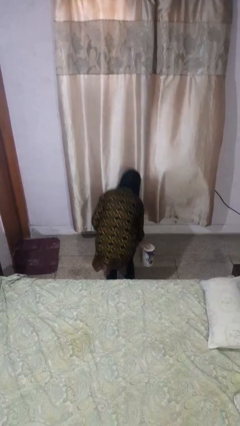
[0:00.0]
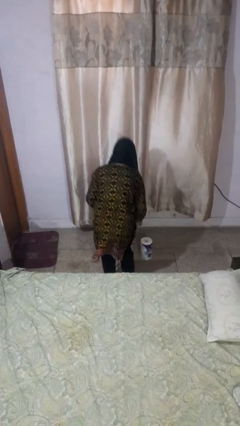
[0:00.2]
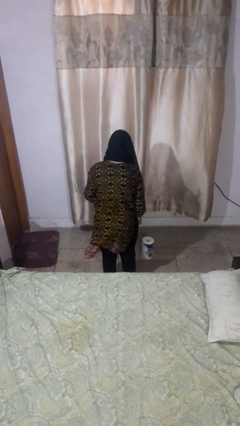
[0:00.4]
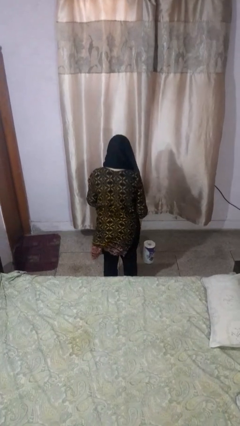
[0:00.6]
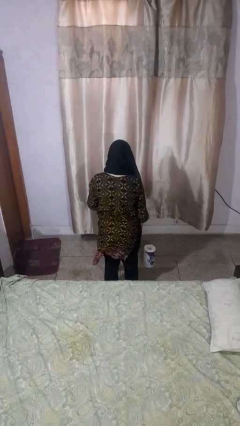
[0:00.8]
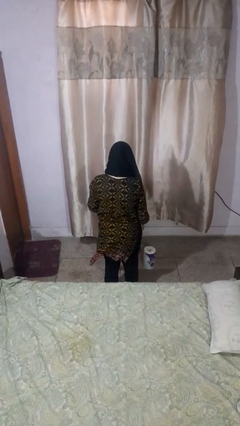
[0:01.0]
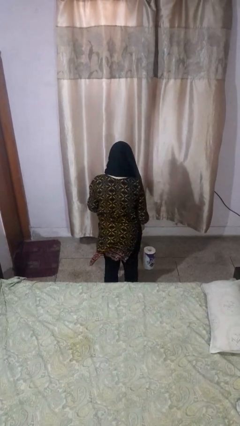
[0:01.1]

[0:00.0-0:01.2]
person picks up object from floor

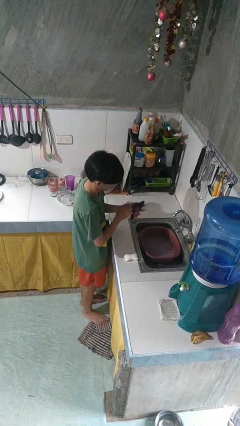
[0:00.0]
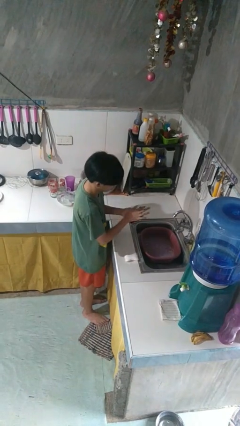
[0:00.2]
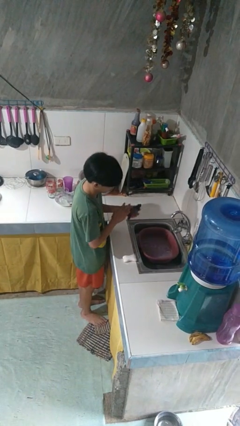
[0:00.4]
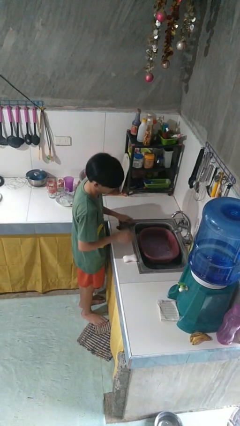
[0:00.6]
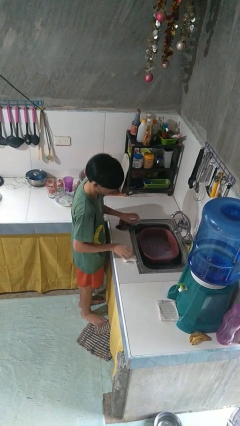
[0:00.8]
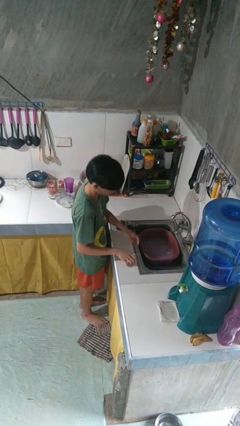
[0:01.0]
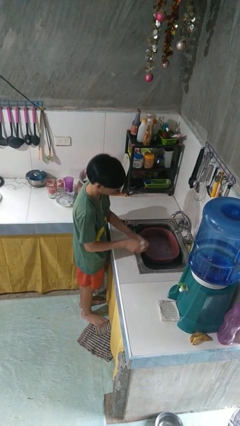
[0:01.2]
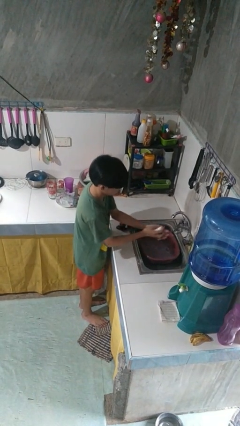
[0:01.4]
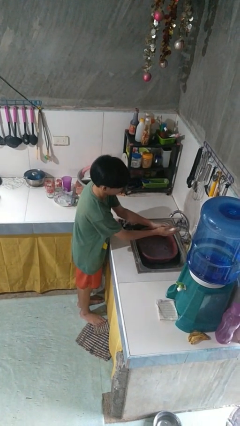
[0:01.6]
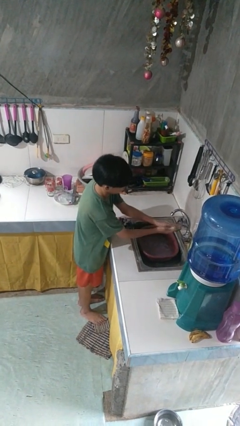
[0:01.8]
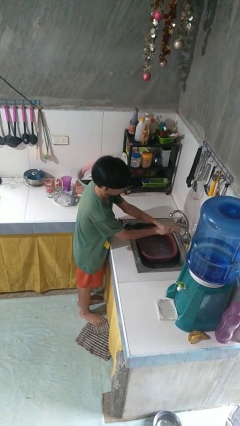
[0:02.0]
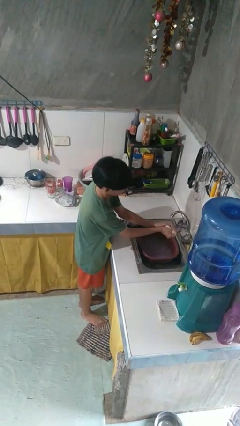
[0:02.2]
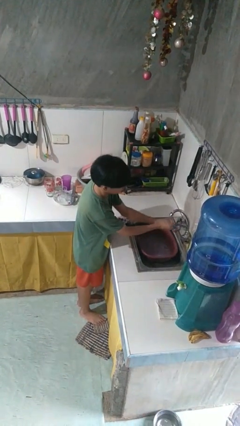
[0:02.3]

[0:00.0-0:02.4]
person washes hands

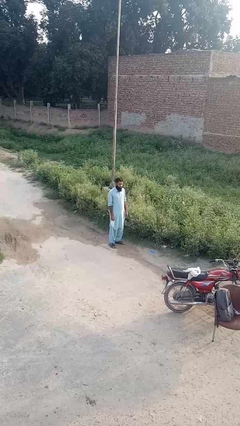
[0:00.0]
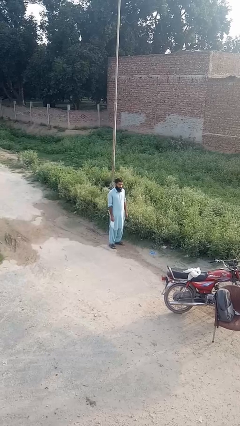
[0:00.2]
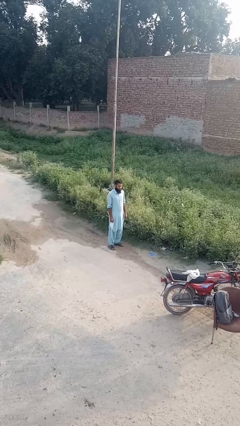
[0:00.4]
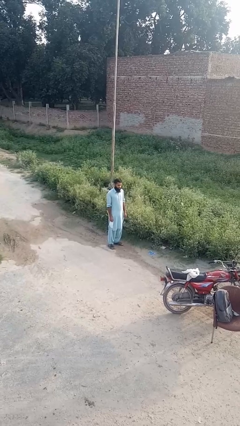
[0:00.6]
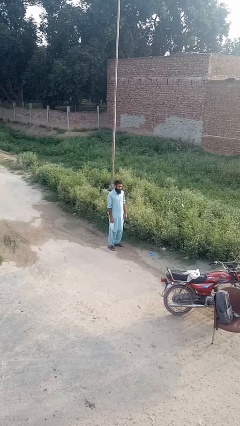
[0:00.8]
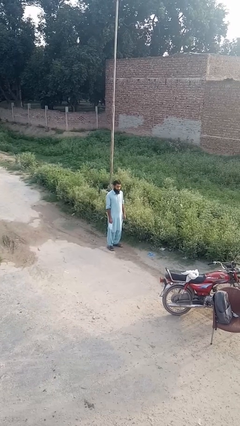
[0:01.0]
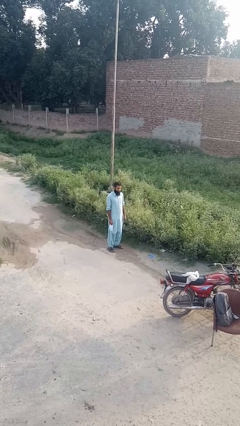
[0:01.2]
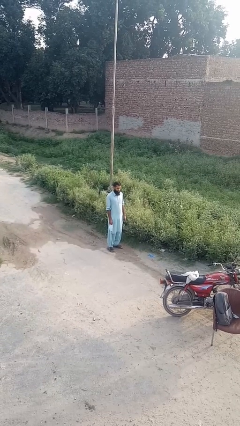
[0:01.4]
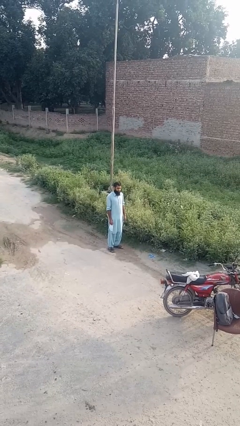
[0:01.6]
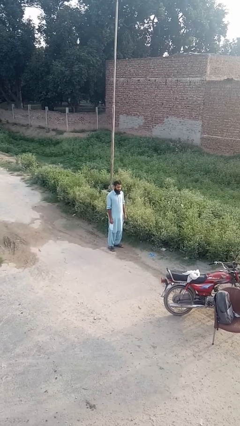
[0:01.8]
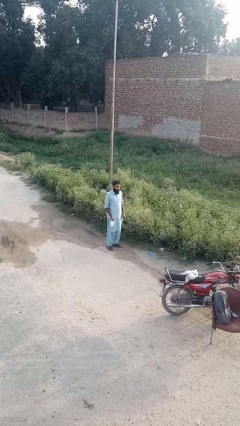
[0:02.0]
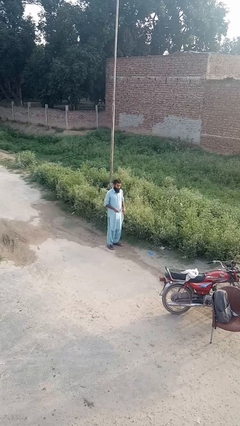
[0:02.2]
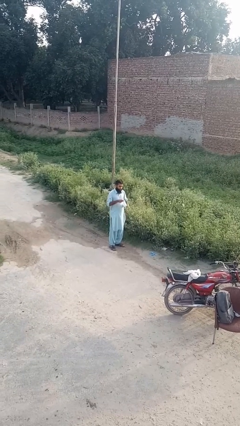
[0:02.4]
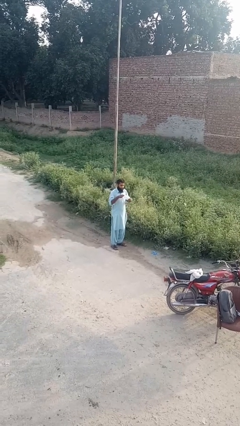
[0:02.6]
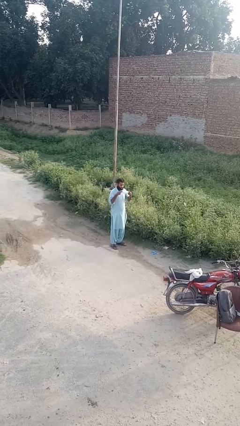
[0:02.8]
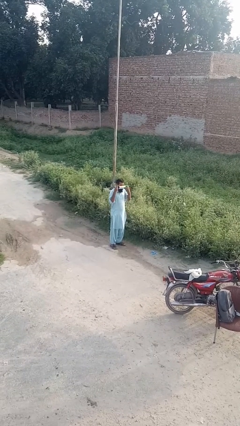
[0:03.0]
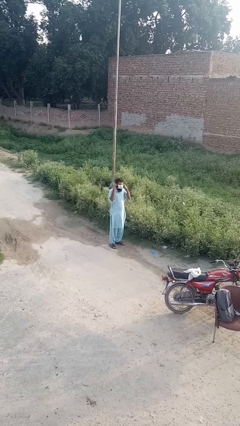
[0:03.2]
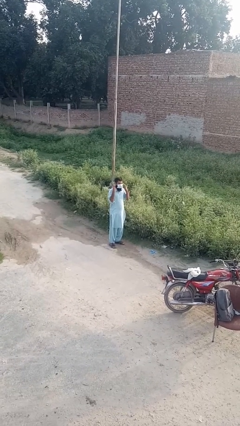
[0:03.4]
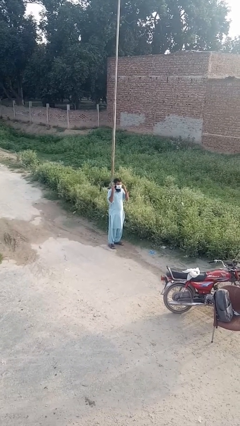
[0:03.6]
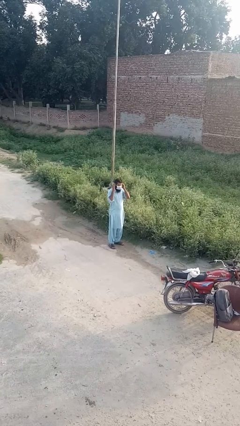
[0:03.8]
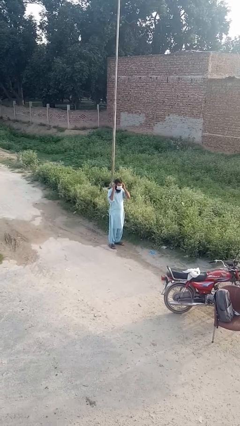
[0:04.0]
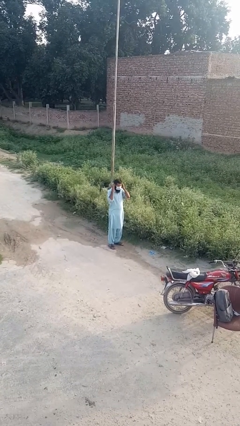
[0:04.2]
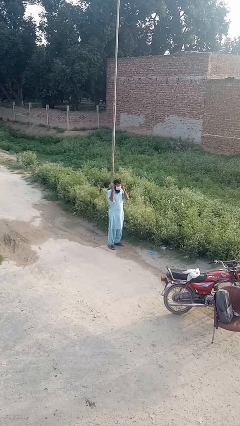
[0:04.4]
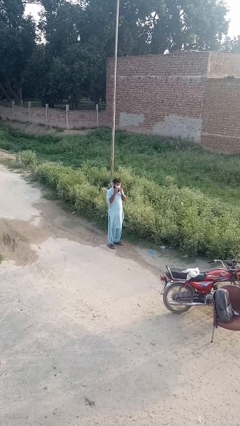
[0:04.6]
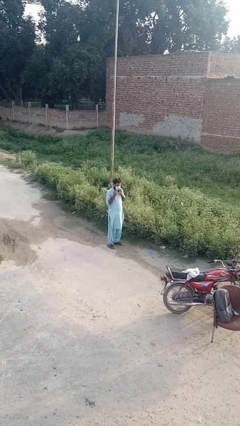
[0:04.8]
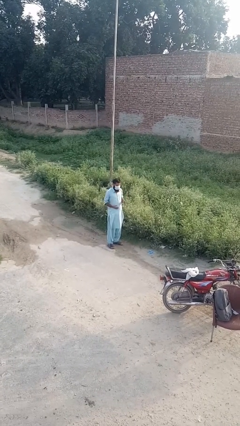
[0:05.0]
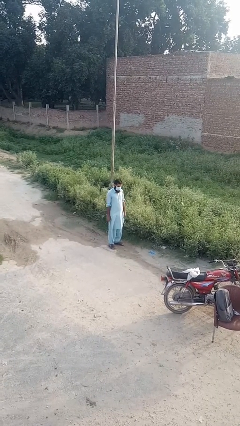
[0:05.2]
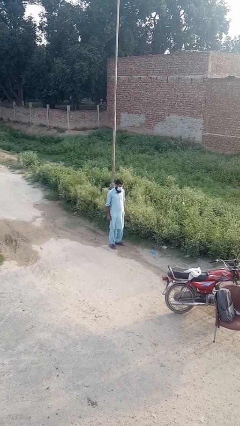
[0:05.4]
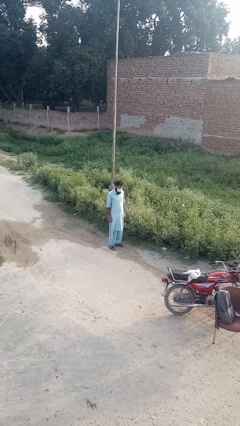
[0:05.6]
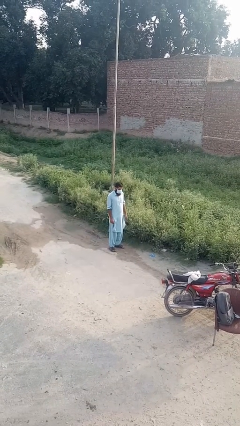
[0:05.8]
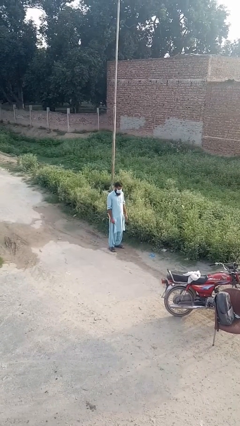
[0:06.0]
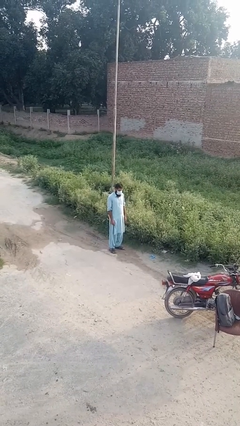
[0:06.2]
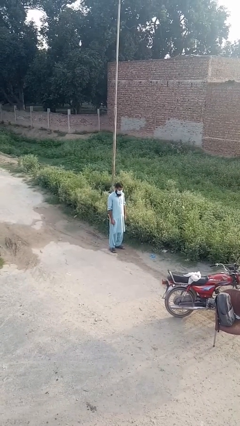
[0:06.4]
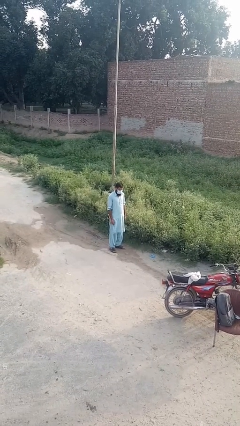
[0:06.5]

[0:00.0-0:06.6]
person puts on facemask

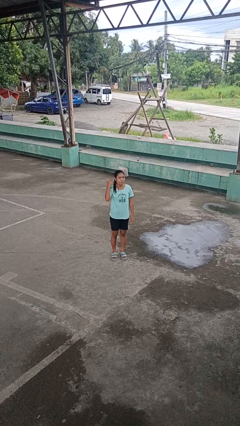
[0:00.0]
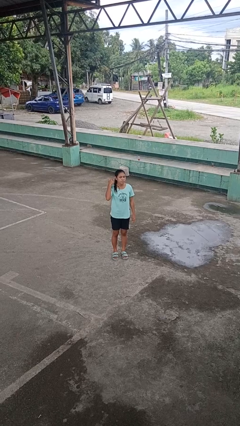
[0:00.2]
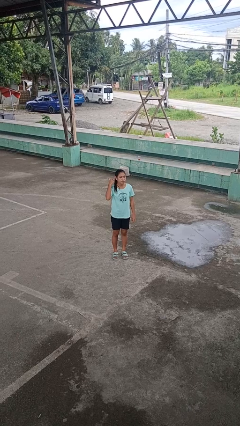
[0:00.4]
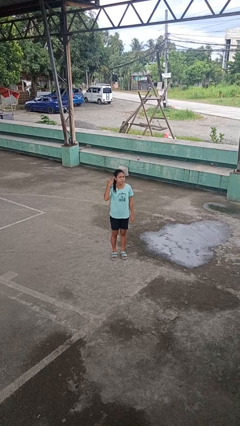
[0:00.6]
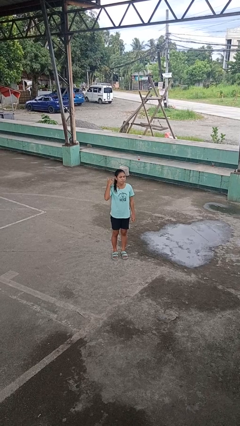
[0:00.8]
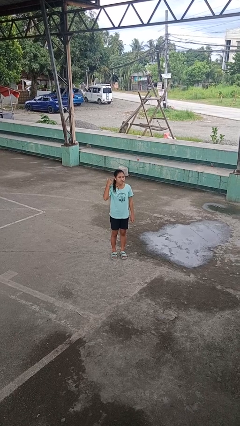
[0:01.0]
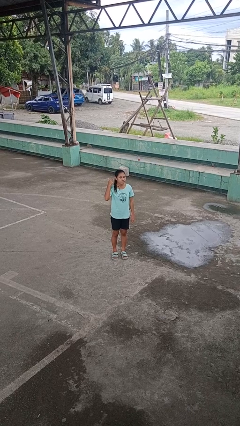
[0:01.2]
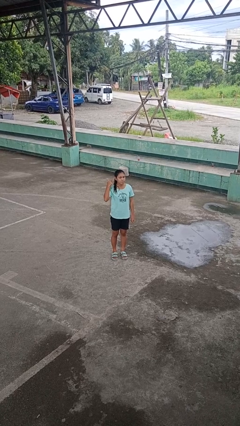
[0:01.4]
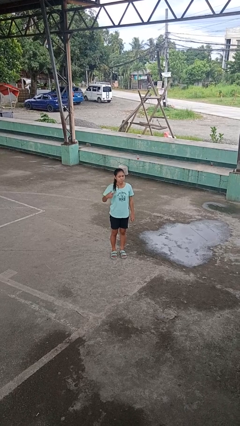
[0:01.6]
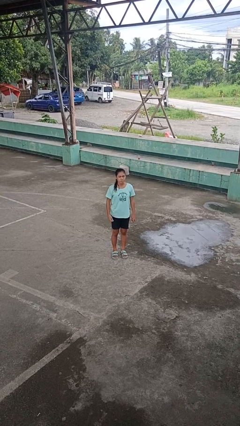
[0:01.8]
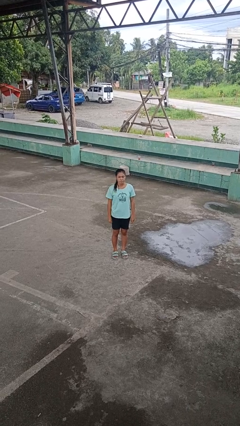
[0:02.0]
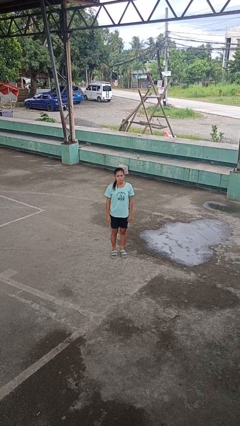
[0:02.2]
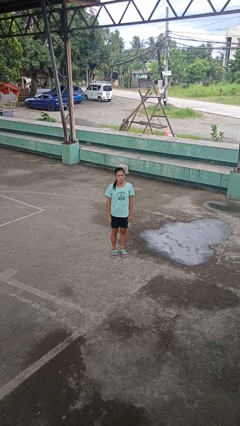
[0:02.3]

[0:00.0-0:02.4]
person gestures listen closely

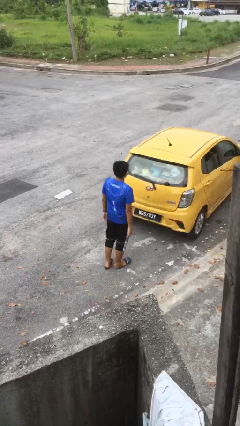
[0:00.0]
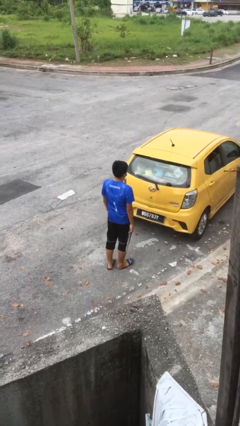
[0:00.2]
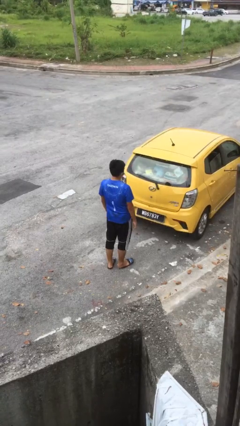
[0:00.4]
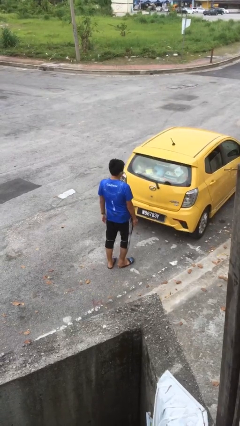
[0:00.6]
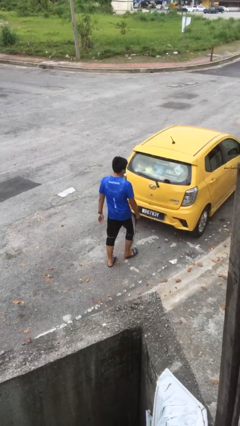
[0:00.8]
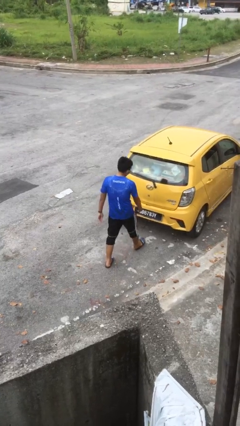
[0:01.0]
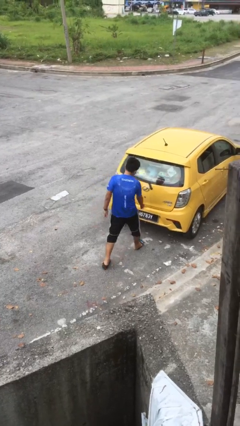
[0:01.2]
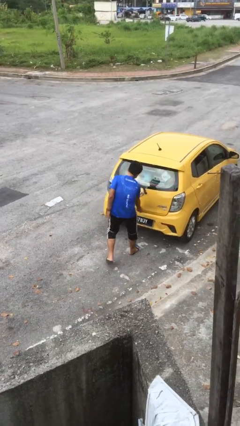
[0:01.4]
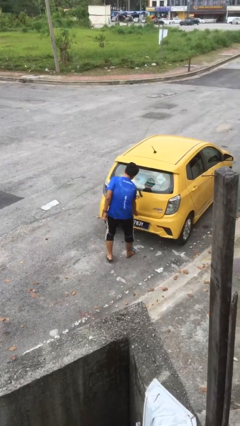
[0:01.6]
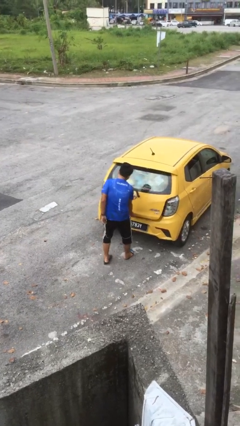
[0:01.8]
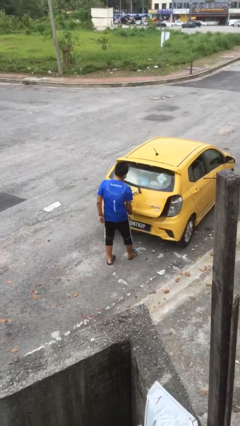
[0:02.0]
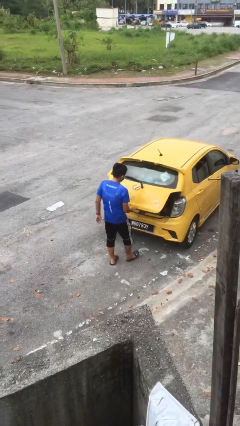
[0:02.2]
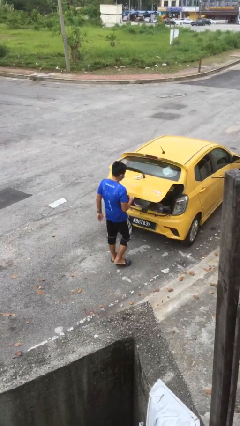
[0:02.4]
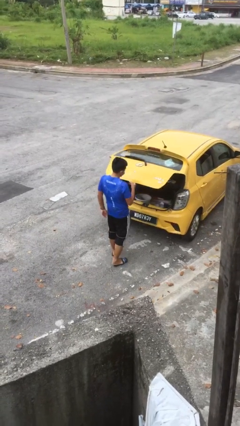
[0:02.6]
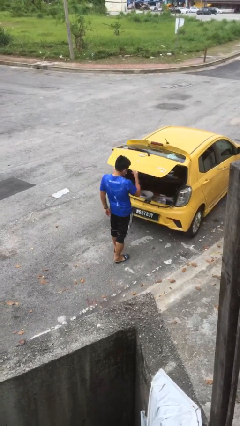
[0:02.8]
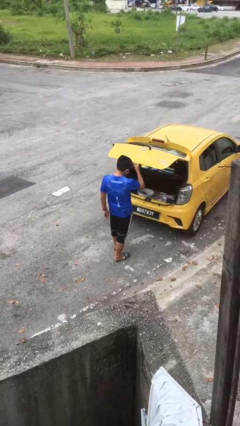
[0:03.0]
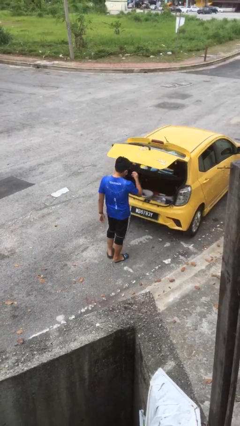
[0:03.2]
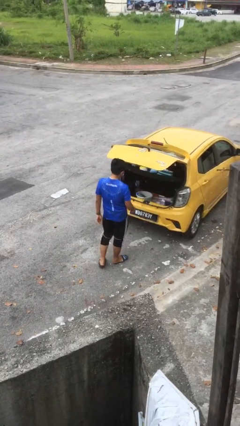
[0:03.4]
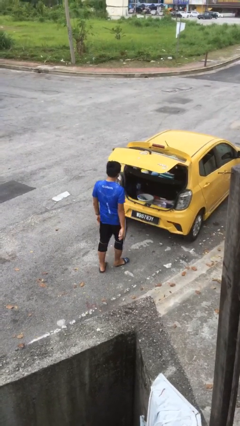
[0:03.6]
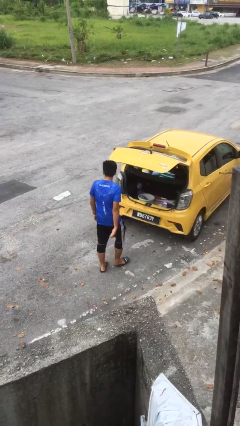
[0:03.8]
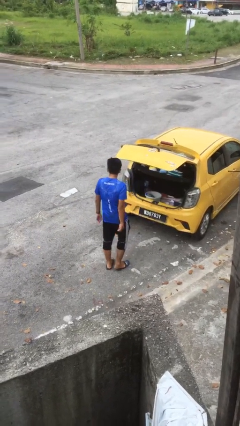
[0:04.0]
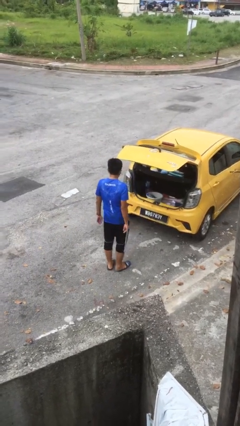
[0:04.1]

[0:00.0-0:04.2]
person opens car trunk

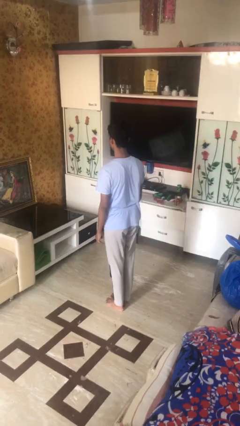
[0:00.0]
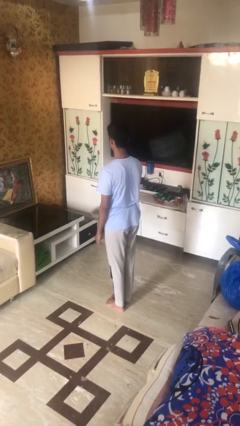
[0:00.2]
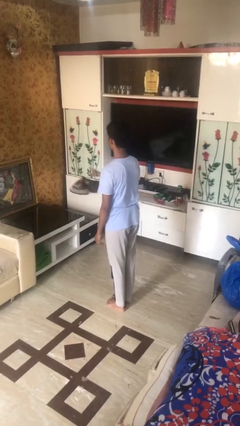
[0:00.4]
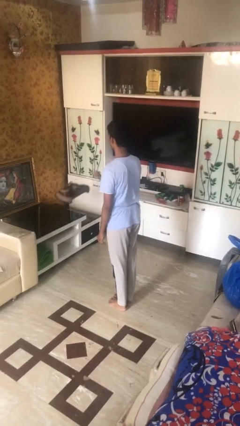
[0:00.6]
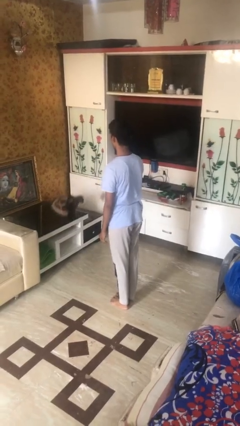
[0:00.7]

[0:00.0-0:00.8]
person throws object on table
